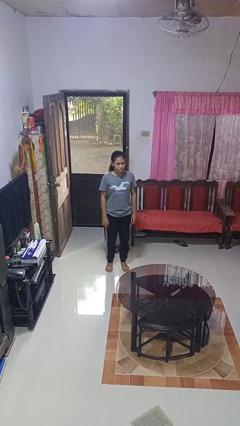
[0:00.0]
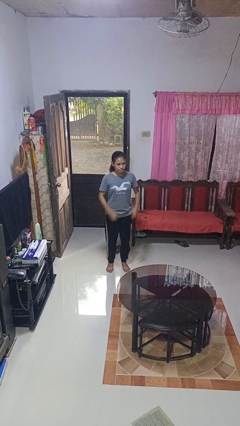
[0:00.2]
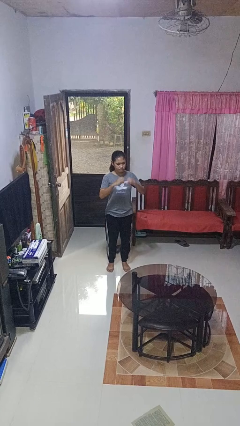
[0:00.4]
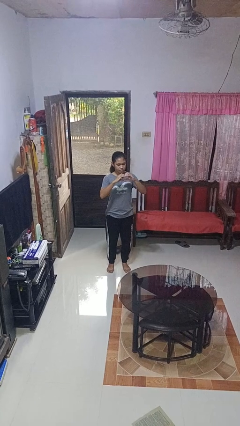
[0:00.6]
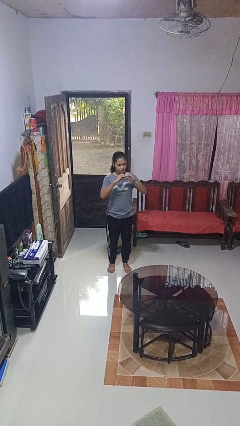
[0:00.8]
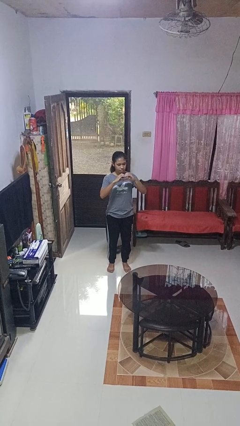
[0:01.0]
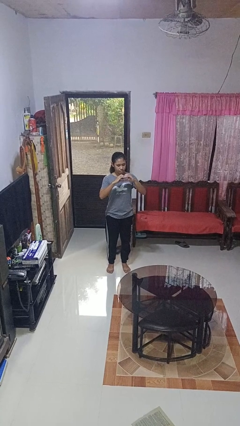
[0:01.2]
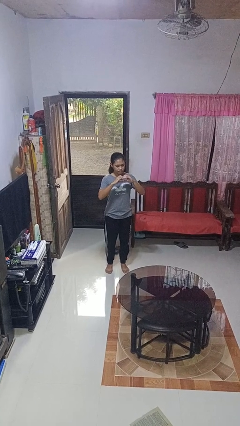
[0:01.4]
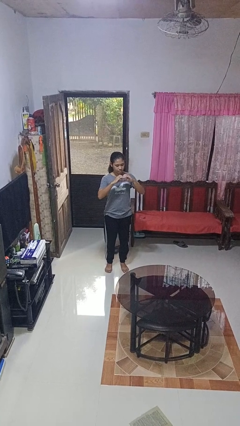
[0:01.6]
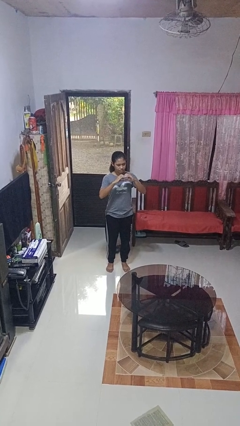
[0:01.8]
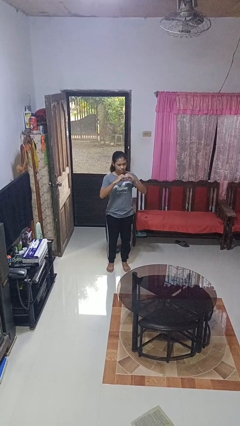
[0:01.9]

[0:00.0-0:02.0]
person gestures heart

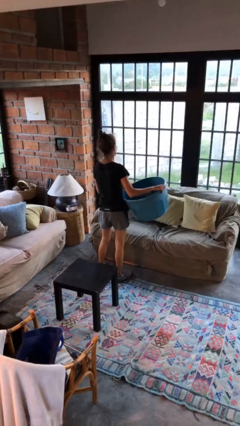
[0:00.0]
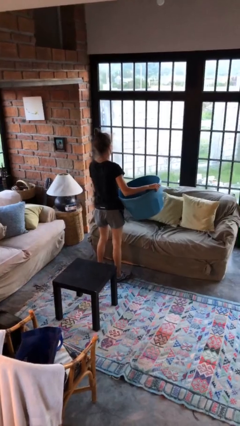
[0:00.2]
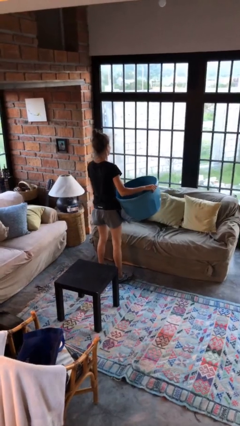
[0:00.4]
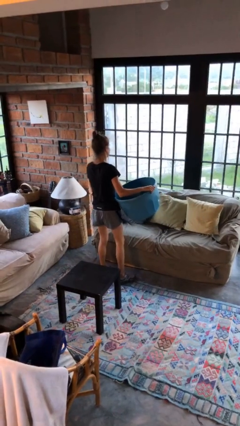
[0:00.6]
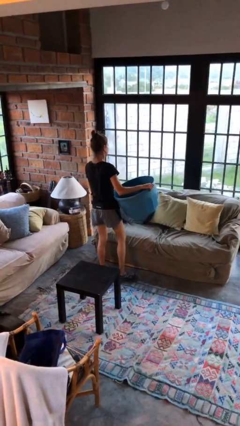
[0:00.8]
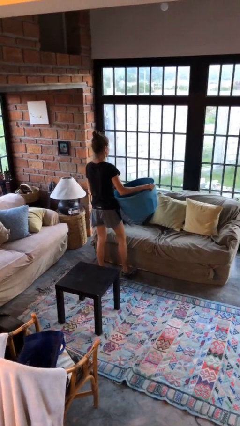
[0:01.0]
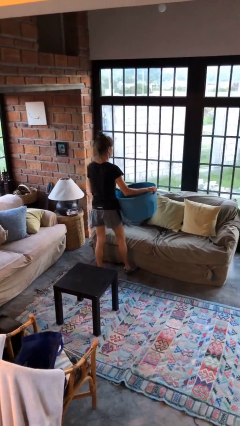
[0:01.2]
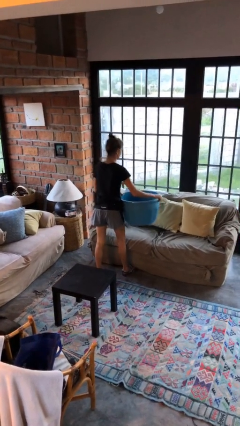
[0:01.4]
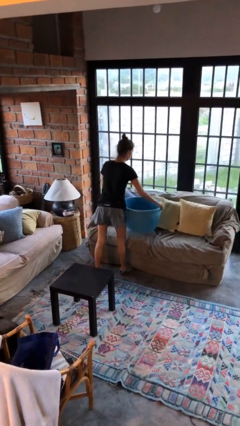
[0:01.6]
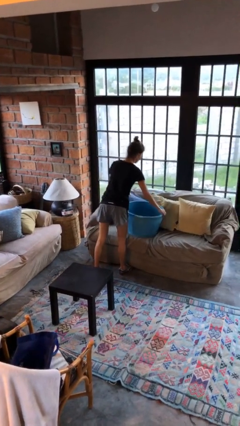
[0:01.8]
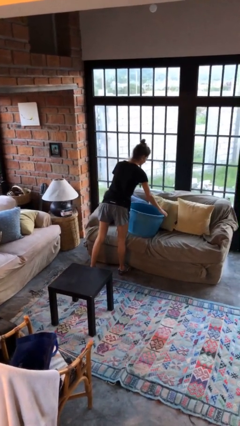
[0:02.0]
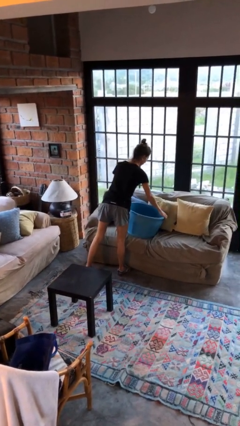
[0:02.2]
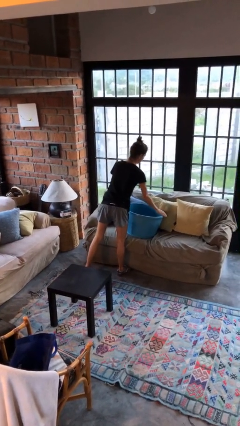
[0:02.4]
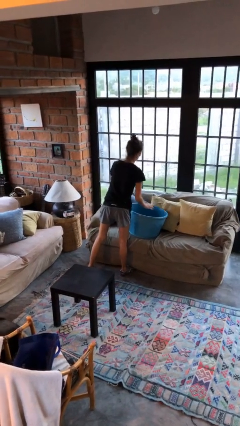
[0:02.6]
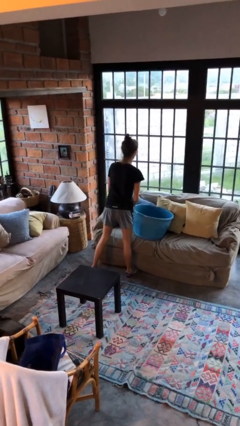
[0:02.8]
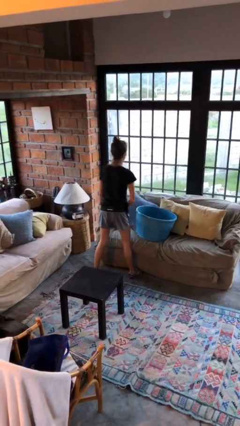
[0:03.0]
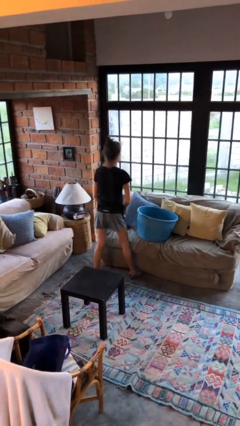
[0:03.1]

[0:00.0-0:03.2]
person puts down object on couch

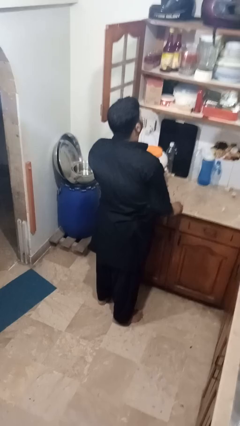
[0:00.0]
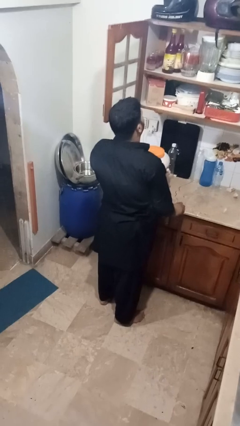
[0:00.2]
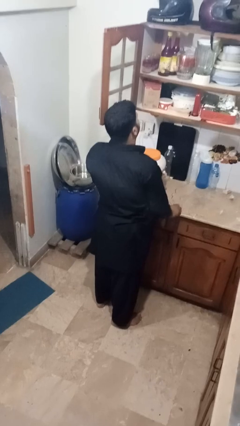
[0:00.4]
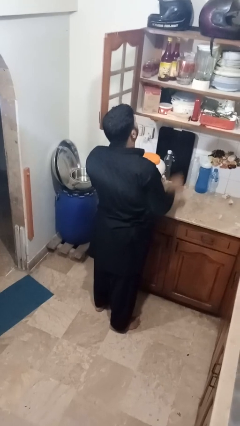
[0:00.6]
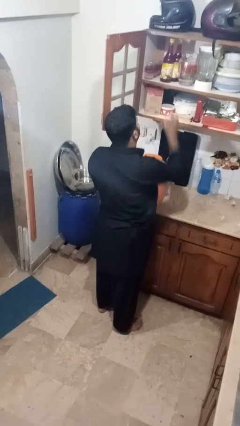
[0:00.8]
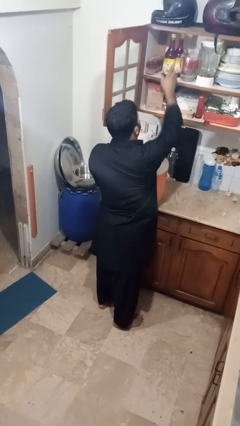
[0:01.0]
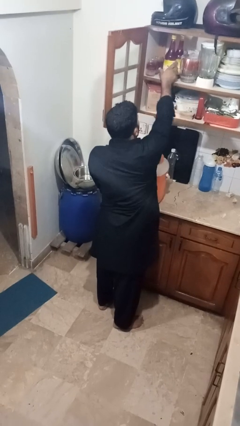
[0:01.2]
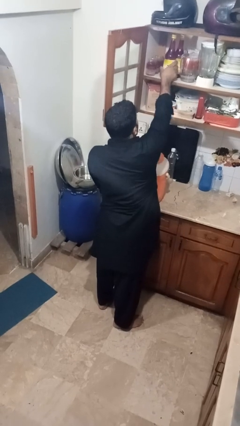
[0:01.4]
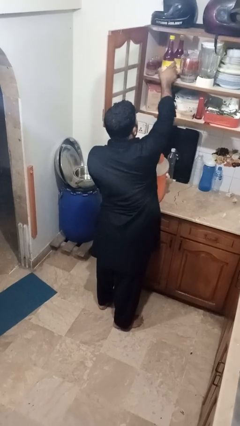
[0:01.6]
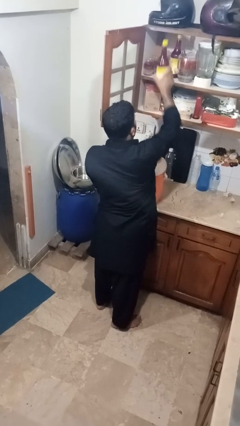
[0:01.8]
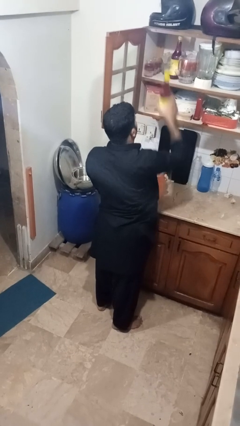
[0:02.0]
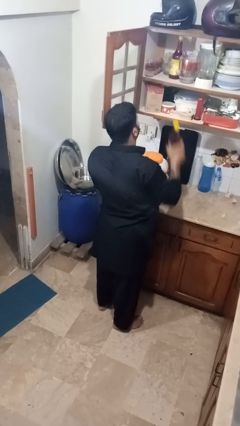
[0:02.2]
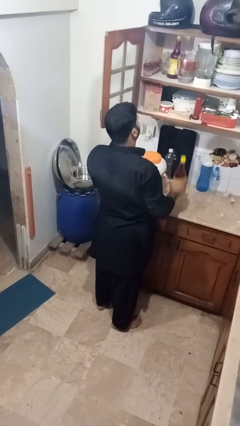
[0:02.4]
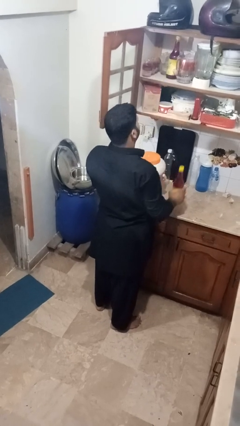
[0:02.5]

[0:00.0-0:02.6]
person picks up object from cabinet

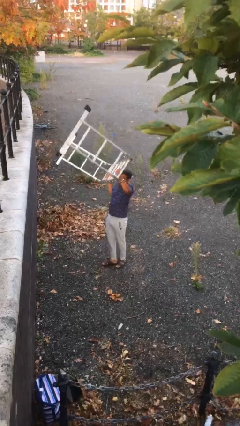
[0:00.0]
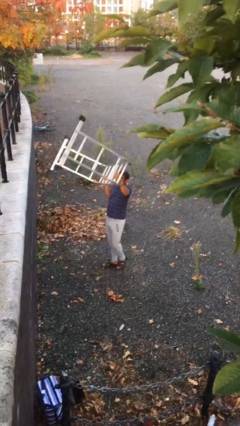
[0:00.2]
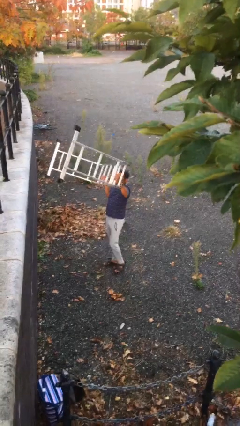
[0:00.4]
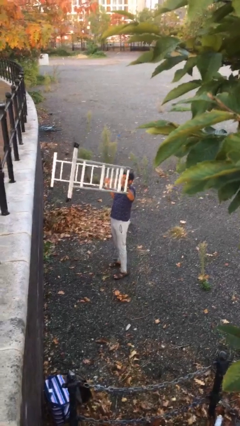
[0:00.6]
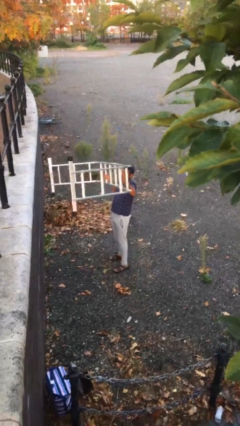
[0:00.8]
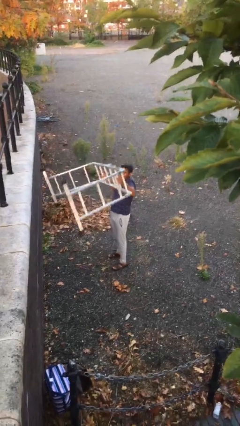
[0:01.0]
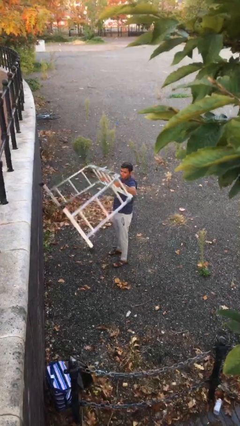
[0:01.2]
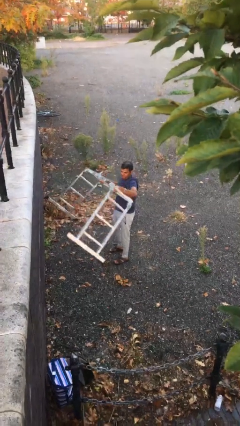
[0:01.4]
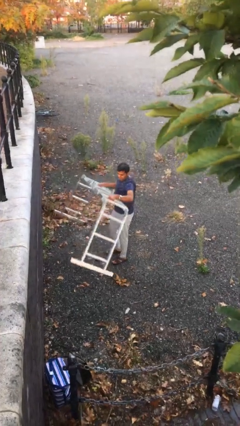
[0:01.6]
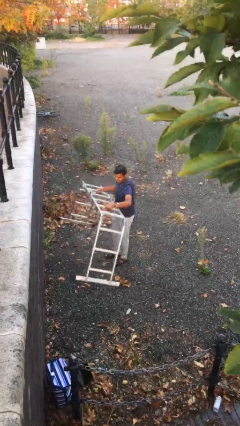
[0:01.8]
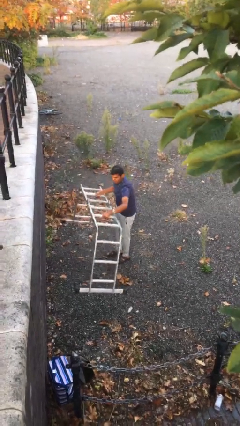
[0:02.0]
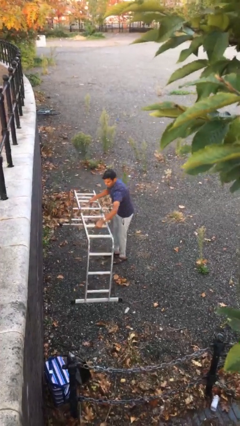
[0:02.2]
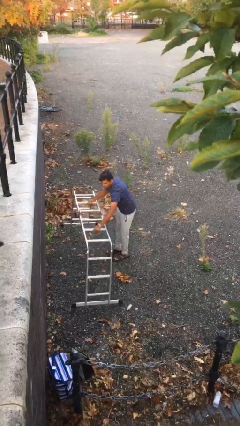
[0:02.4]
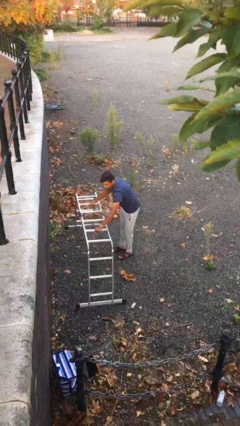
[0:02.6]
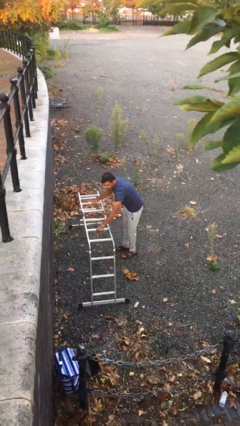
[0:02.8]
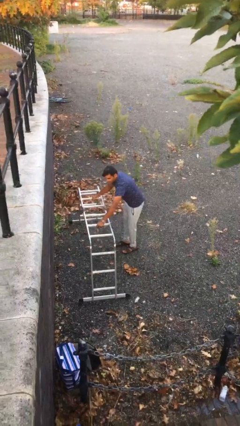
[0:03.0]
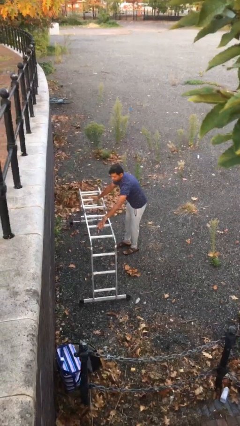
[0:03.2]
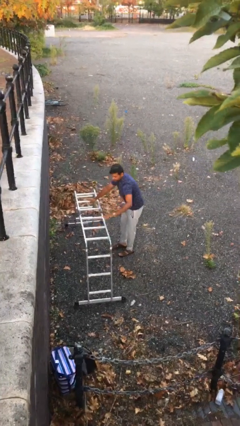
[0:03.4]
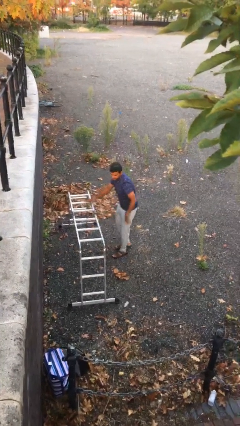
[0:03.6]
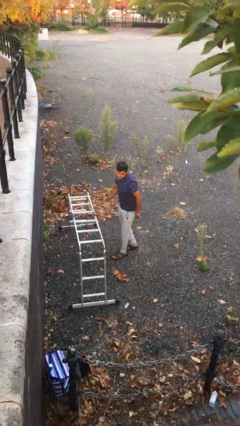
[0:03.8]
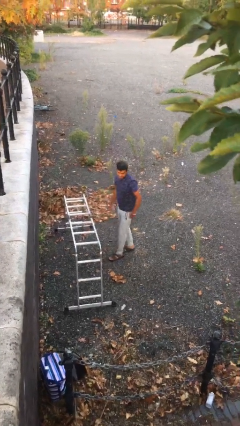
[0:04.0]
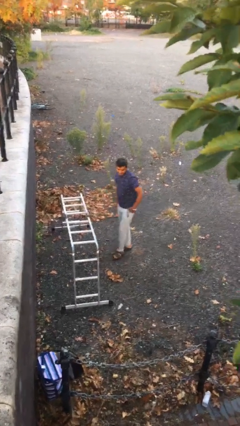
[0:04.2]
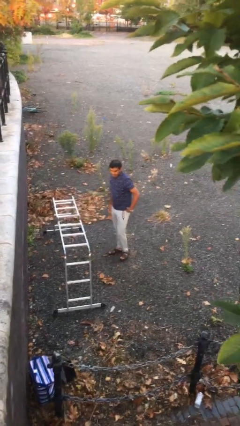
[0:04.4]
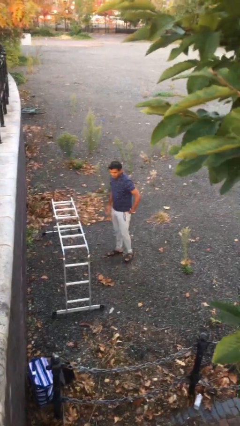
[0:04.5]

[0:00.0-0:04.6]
person puts down object on floor

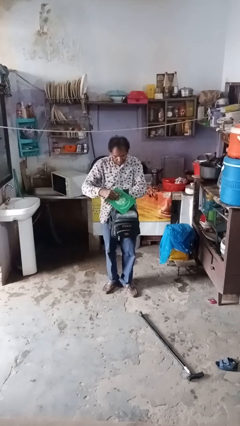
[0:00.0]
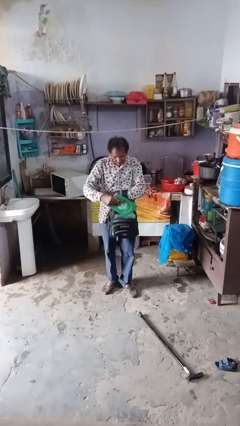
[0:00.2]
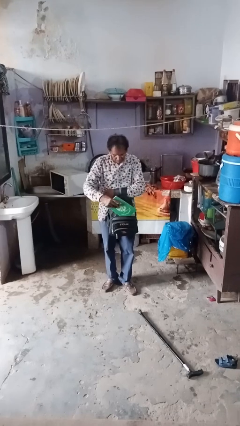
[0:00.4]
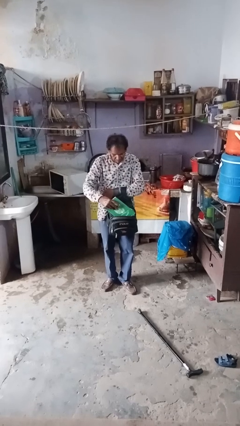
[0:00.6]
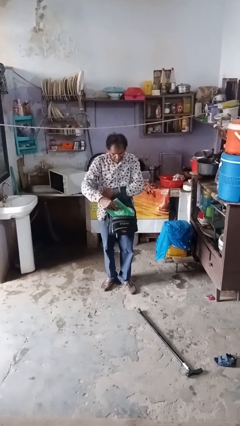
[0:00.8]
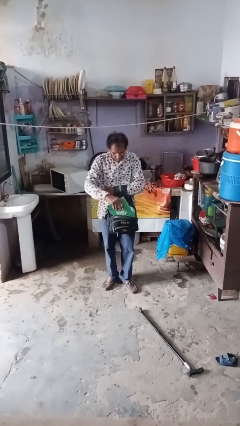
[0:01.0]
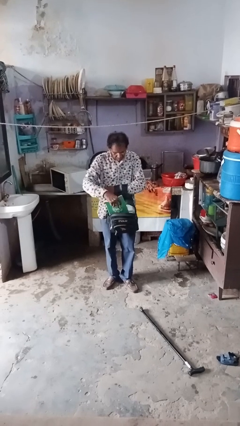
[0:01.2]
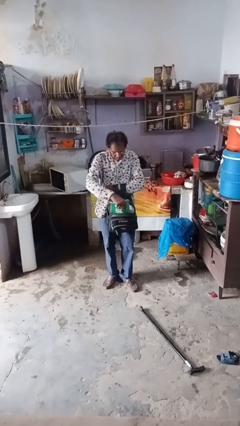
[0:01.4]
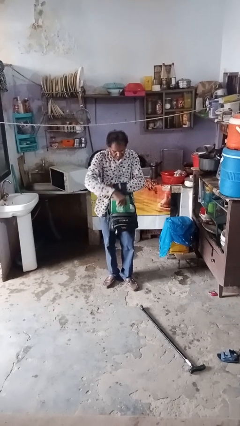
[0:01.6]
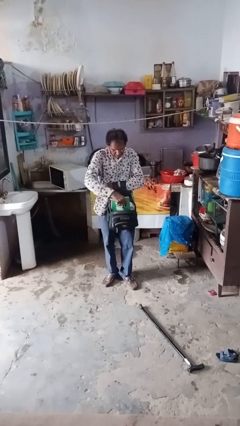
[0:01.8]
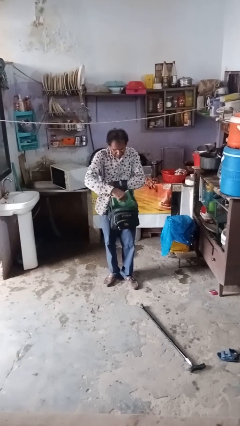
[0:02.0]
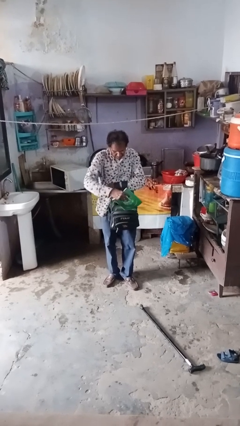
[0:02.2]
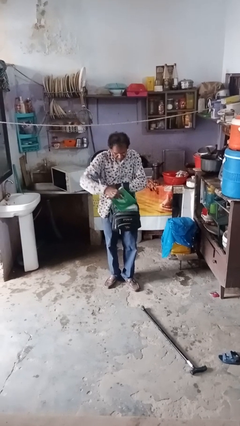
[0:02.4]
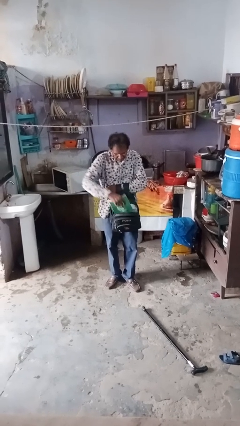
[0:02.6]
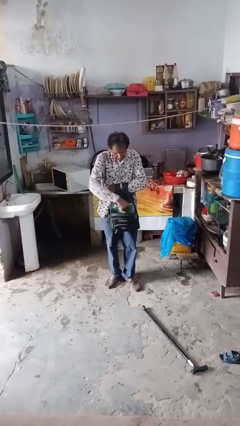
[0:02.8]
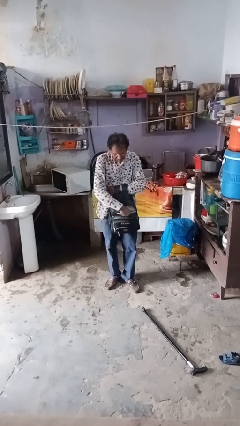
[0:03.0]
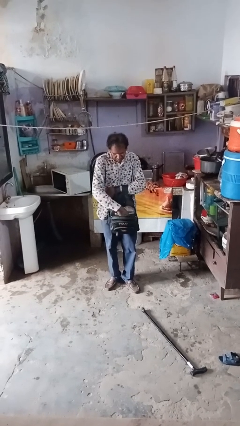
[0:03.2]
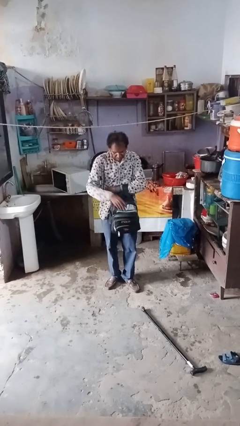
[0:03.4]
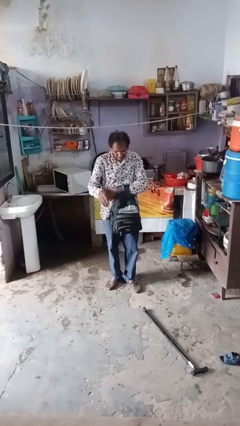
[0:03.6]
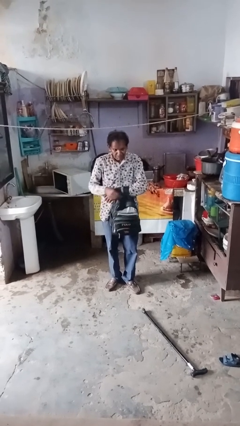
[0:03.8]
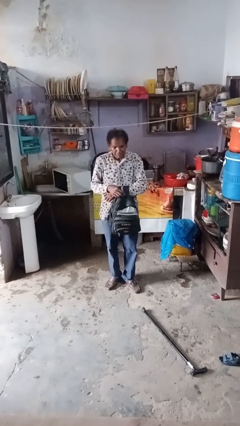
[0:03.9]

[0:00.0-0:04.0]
person puts object into bag

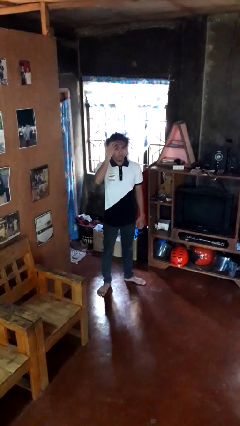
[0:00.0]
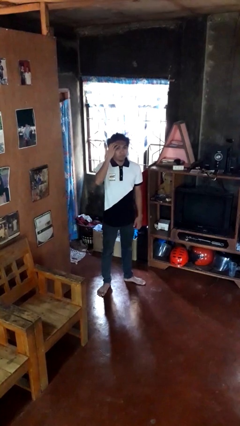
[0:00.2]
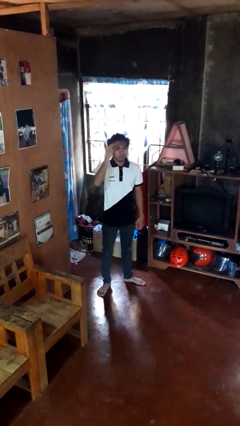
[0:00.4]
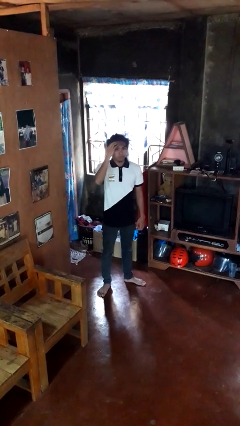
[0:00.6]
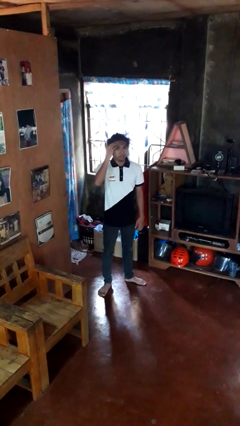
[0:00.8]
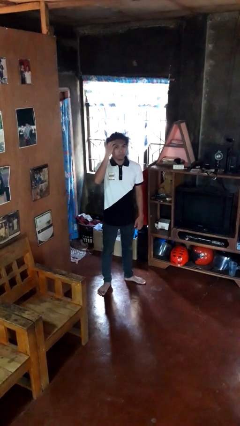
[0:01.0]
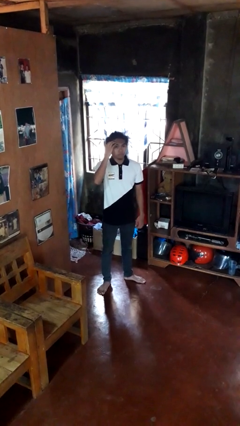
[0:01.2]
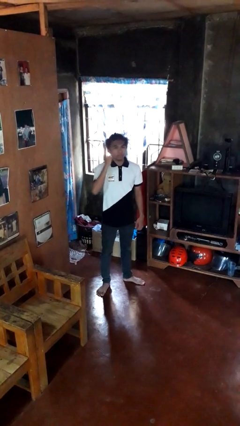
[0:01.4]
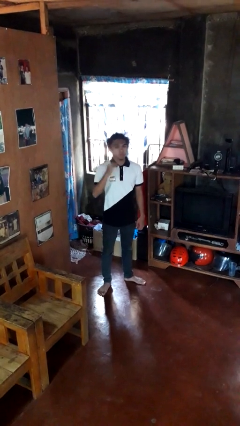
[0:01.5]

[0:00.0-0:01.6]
person scratches face
